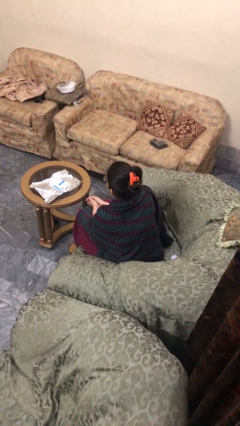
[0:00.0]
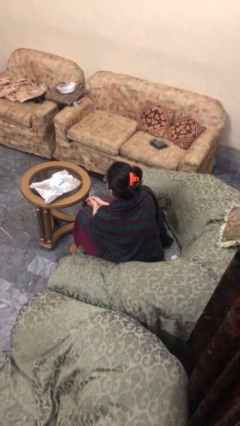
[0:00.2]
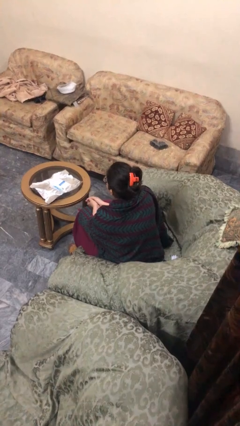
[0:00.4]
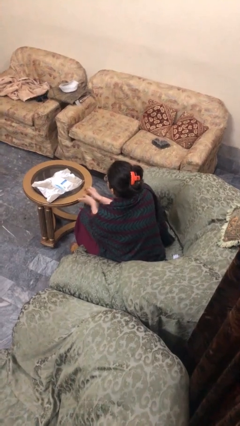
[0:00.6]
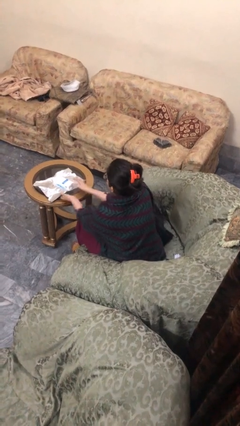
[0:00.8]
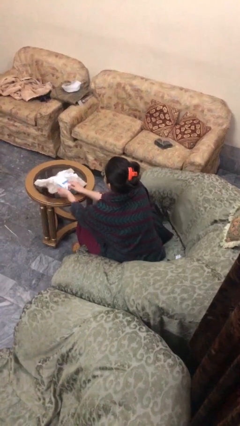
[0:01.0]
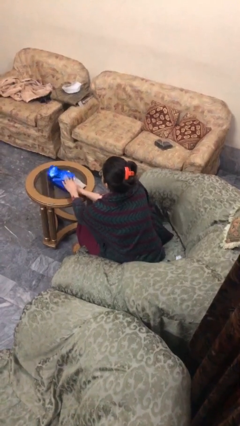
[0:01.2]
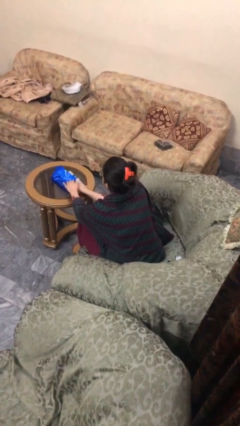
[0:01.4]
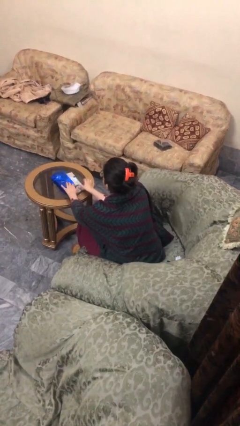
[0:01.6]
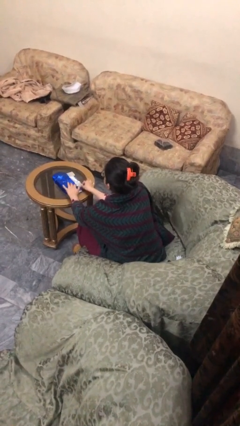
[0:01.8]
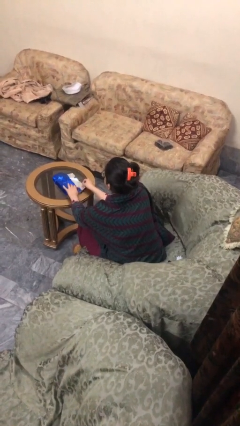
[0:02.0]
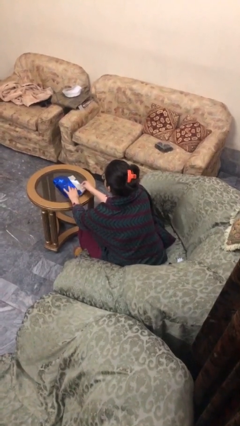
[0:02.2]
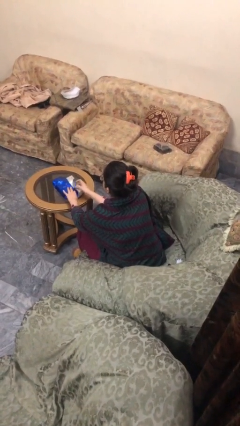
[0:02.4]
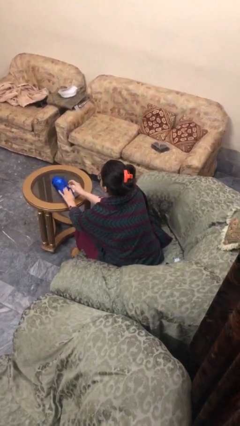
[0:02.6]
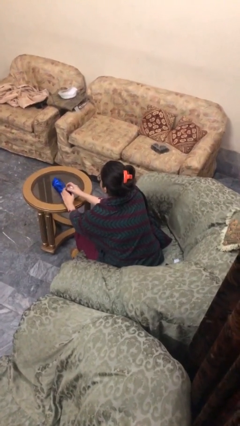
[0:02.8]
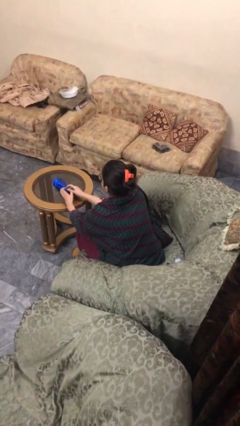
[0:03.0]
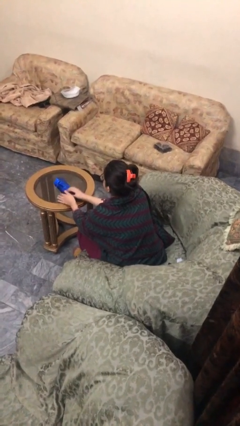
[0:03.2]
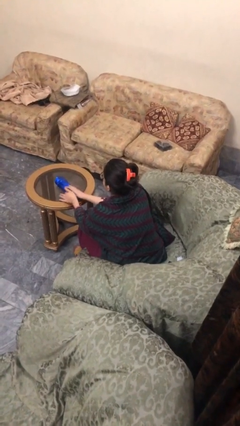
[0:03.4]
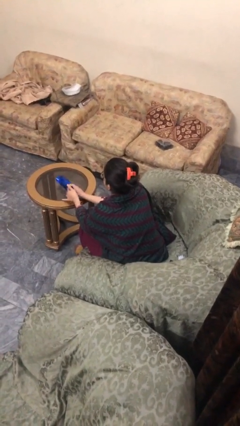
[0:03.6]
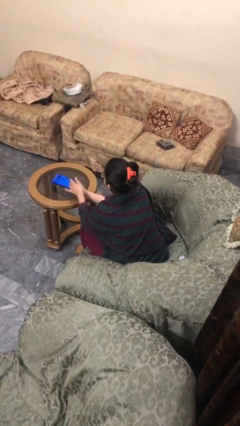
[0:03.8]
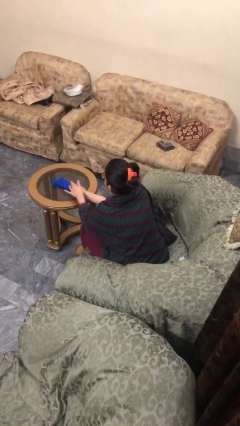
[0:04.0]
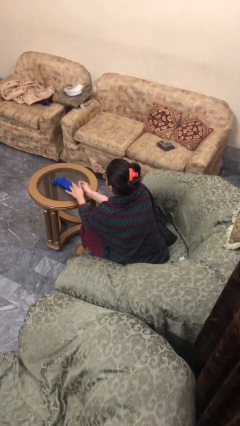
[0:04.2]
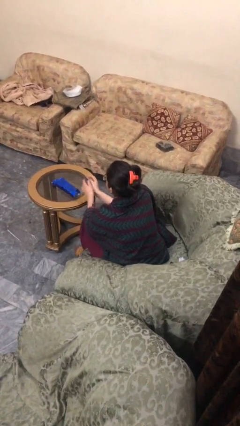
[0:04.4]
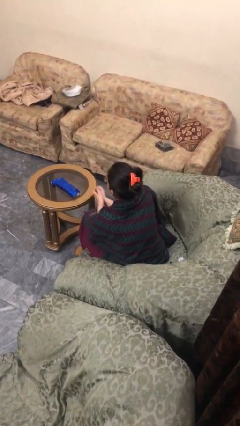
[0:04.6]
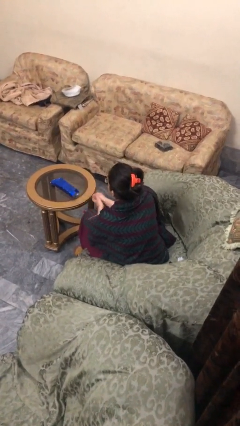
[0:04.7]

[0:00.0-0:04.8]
person wraps box

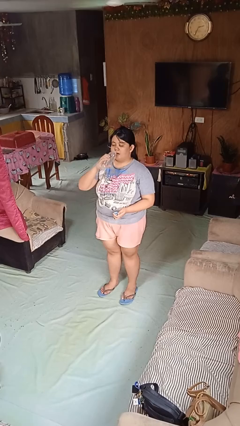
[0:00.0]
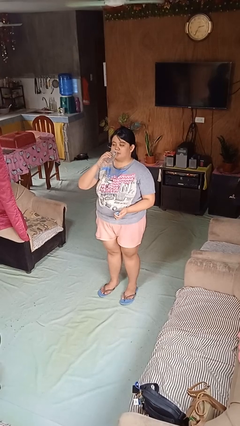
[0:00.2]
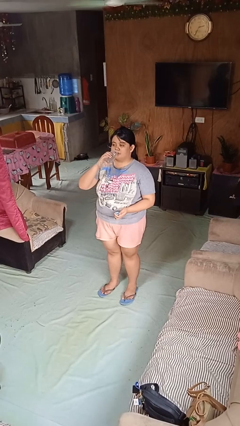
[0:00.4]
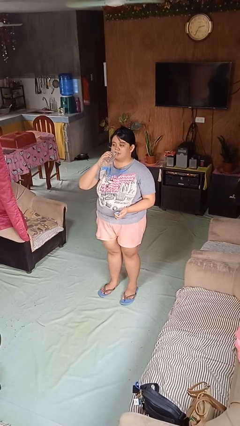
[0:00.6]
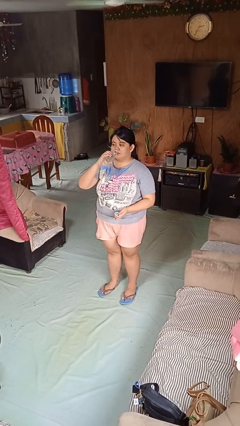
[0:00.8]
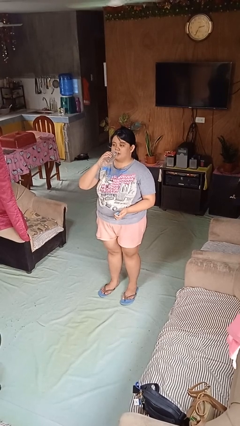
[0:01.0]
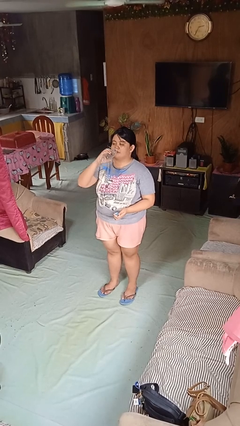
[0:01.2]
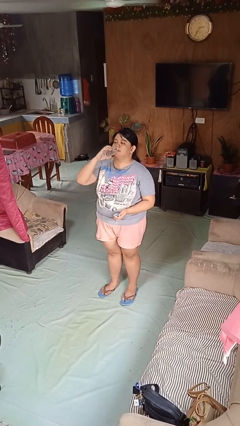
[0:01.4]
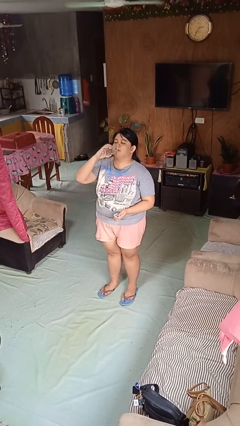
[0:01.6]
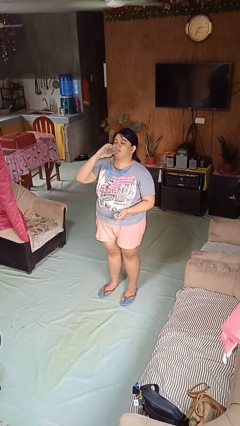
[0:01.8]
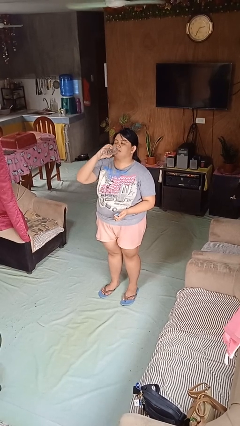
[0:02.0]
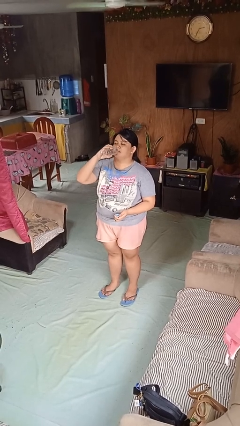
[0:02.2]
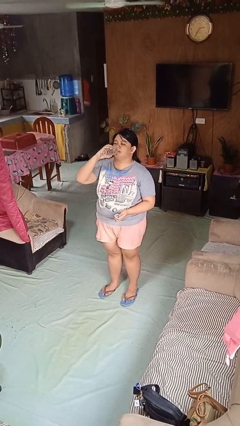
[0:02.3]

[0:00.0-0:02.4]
person drinks from bottle

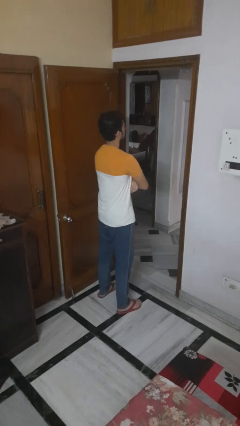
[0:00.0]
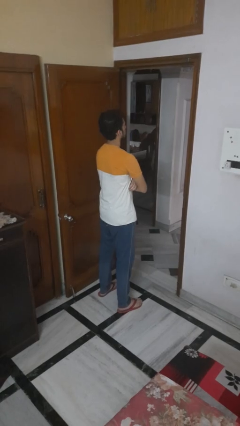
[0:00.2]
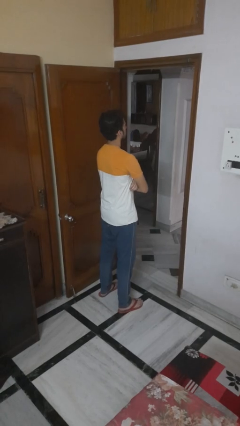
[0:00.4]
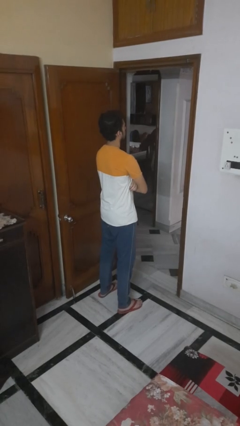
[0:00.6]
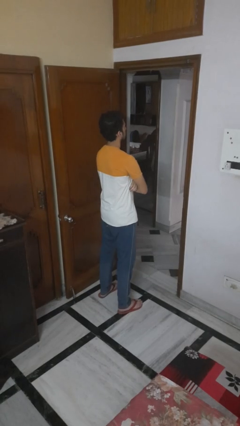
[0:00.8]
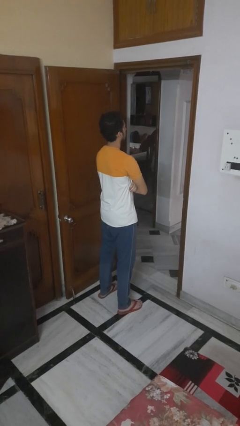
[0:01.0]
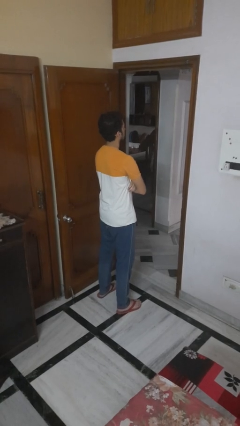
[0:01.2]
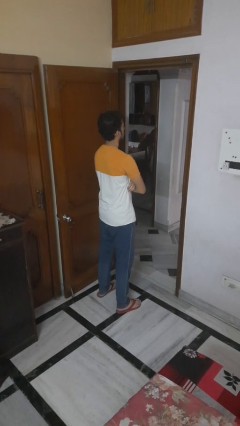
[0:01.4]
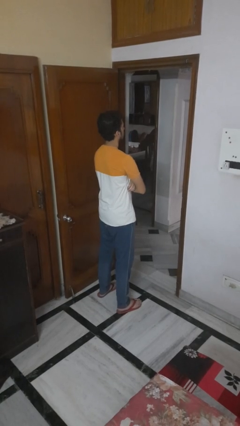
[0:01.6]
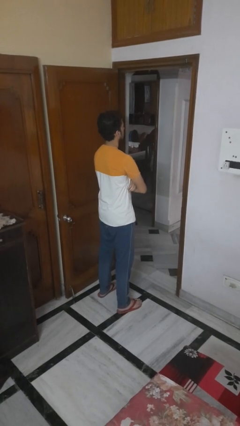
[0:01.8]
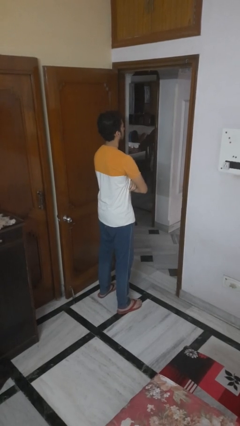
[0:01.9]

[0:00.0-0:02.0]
person crosses arms

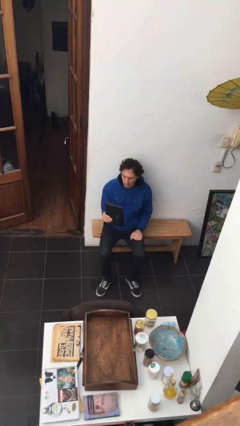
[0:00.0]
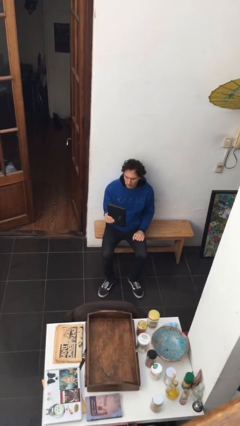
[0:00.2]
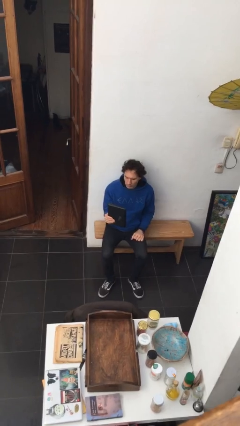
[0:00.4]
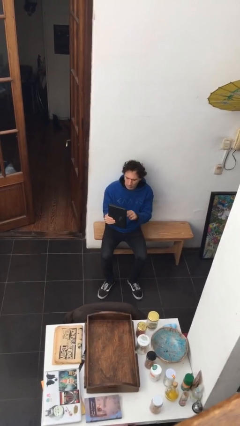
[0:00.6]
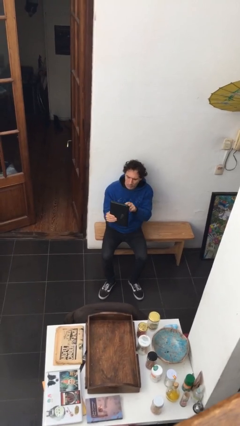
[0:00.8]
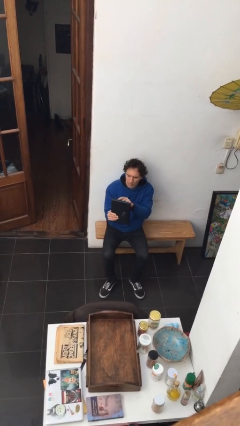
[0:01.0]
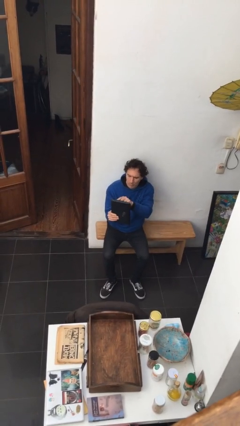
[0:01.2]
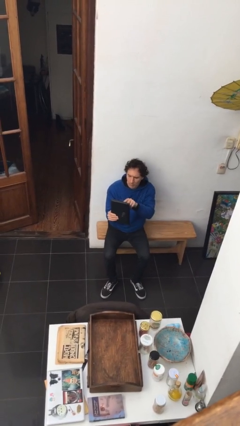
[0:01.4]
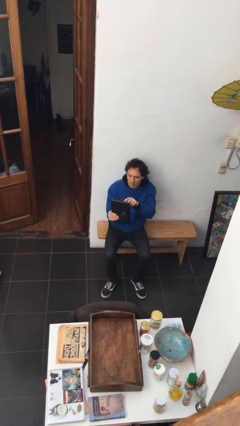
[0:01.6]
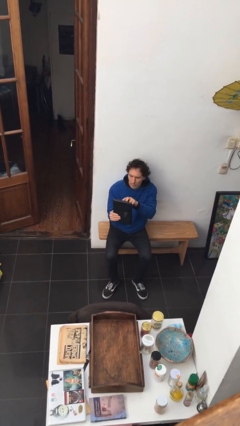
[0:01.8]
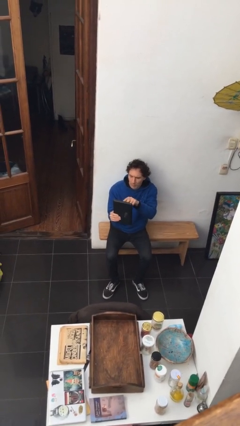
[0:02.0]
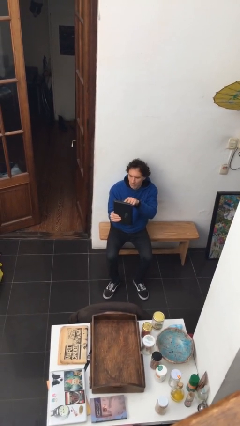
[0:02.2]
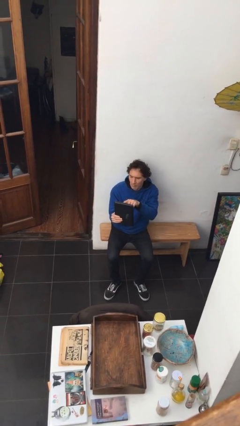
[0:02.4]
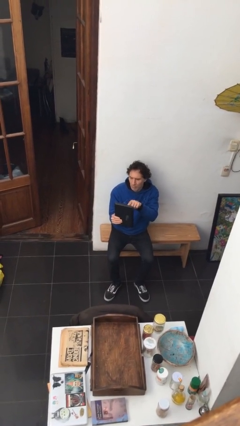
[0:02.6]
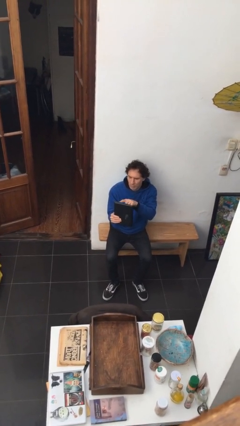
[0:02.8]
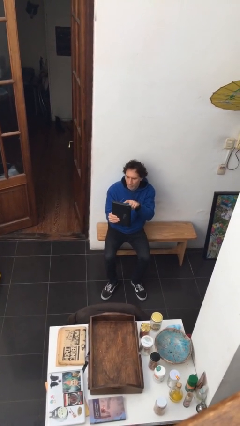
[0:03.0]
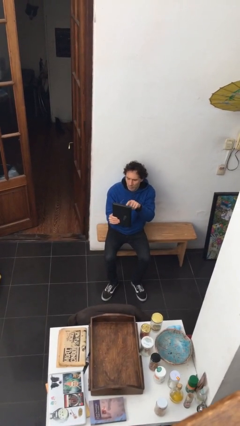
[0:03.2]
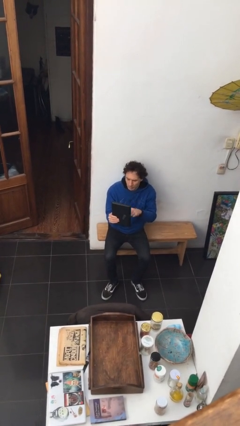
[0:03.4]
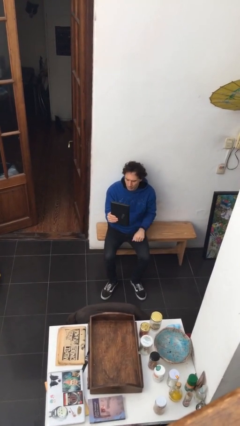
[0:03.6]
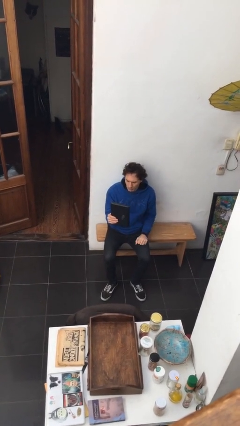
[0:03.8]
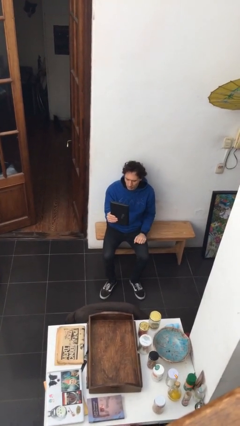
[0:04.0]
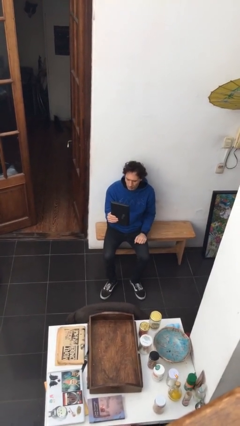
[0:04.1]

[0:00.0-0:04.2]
person interacts with tablet

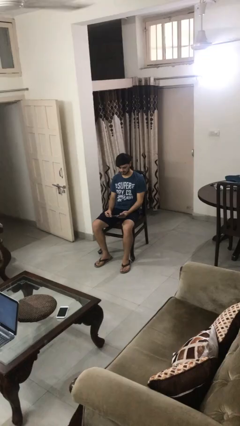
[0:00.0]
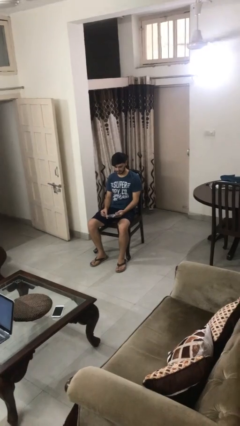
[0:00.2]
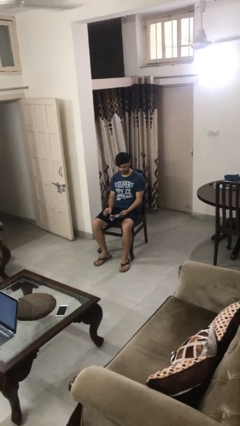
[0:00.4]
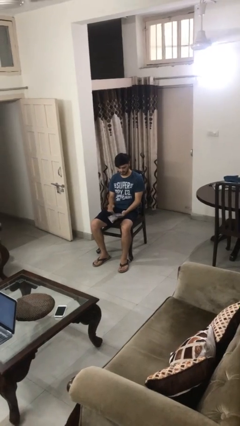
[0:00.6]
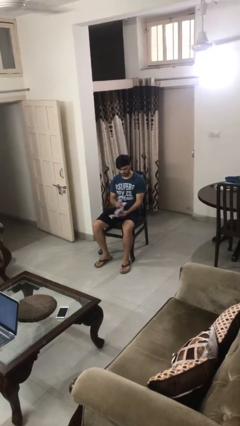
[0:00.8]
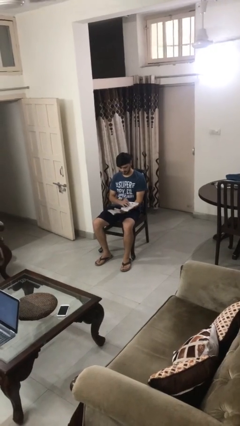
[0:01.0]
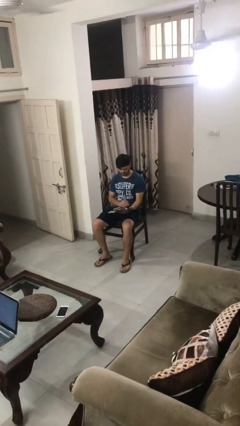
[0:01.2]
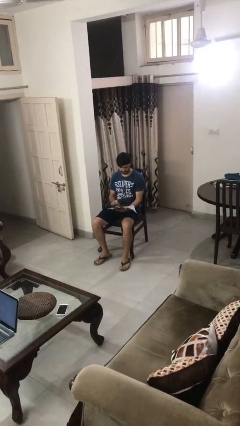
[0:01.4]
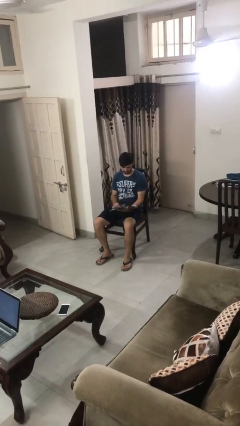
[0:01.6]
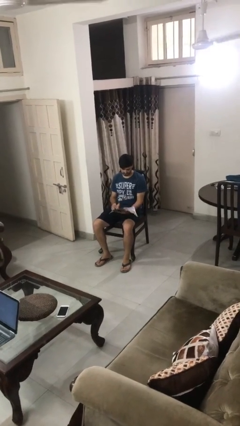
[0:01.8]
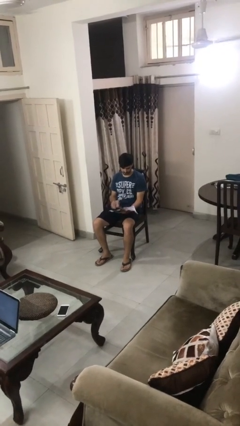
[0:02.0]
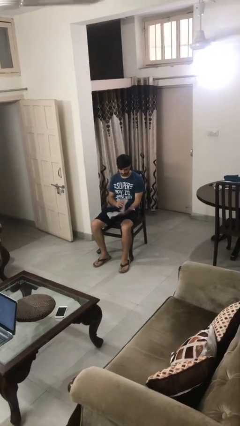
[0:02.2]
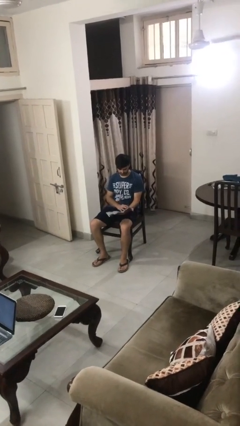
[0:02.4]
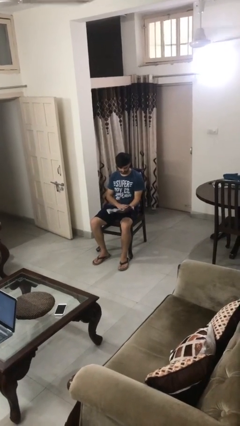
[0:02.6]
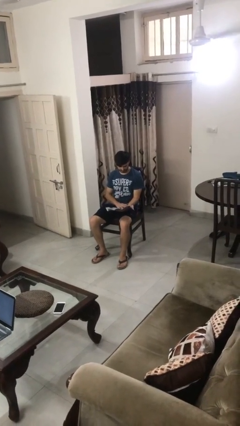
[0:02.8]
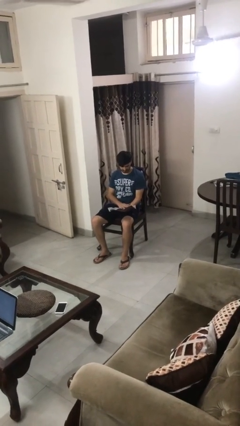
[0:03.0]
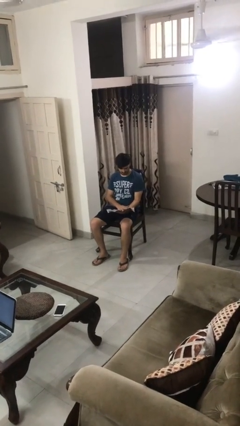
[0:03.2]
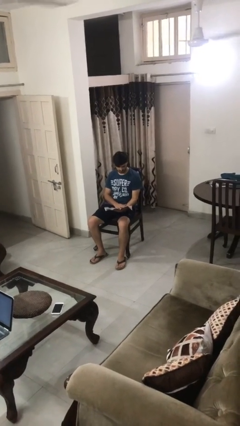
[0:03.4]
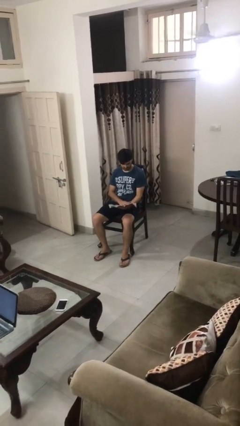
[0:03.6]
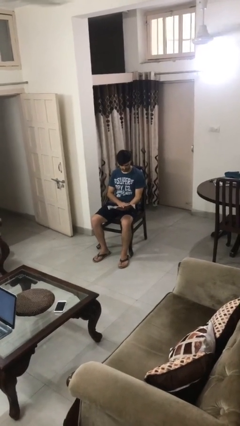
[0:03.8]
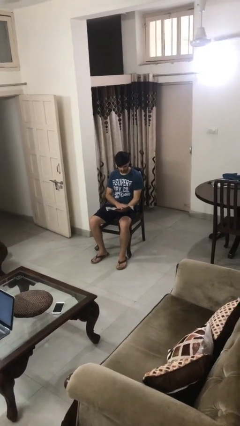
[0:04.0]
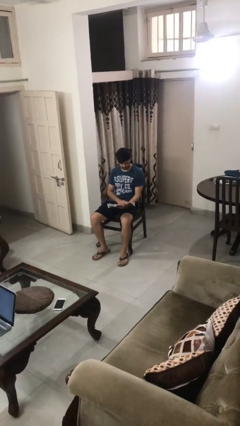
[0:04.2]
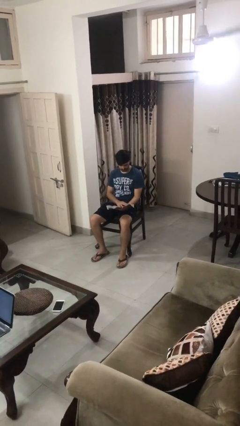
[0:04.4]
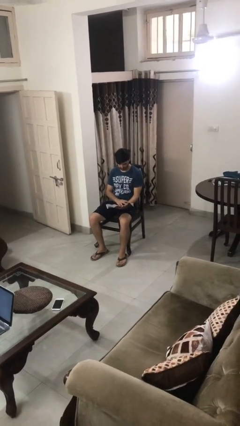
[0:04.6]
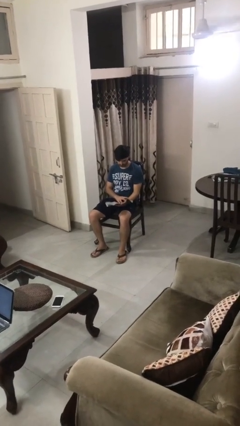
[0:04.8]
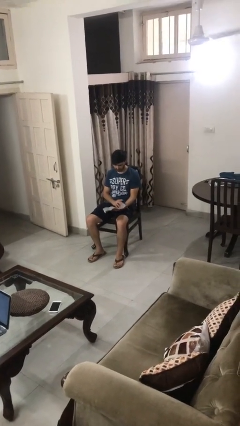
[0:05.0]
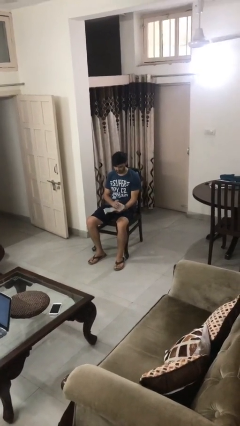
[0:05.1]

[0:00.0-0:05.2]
person reads magazine
